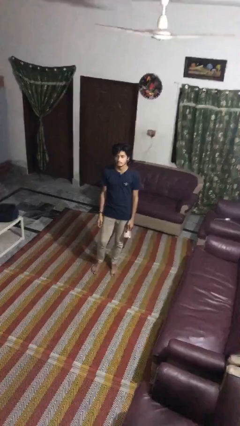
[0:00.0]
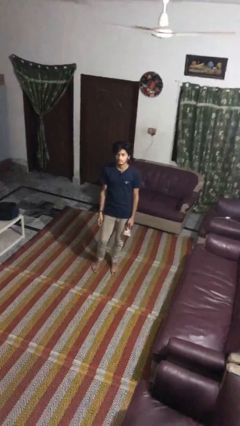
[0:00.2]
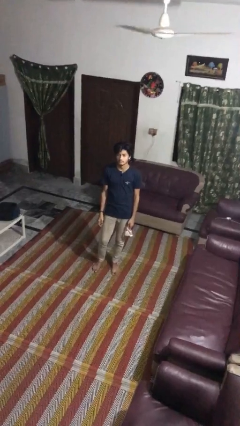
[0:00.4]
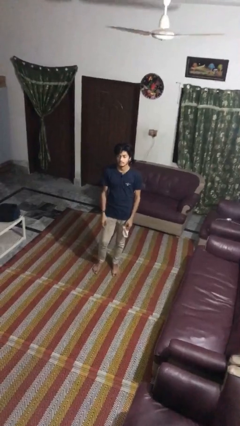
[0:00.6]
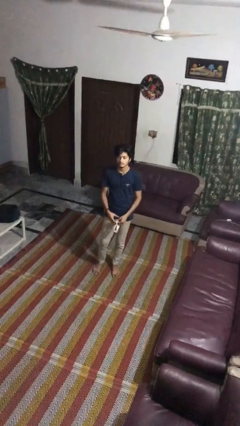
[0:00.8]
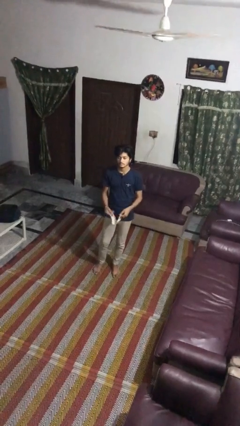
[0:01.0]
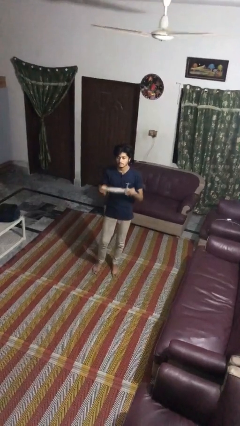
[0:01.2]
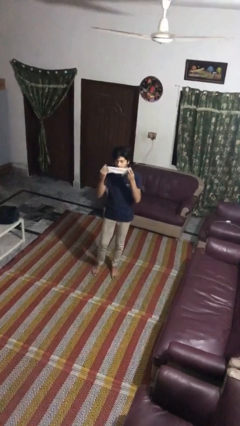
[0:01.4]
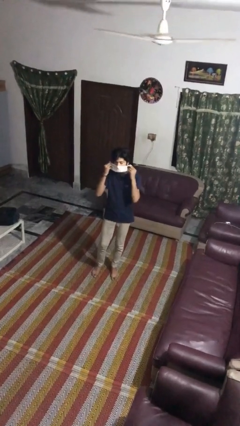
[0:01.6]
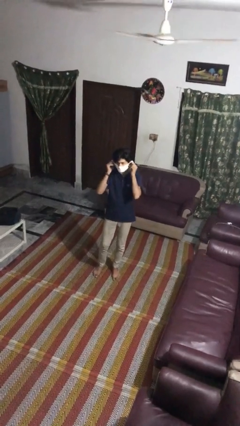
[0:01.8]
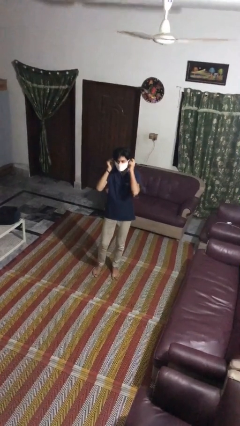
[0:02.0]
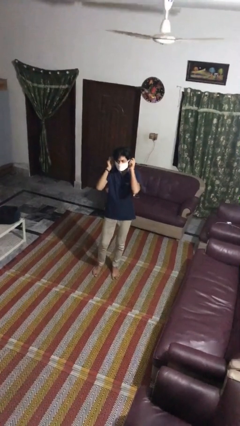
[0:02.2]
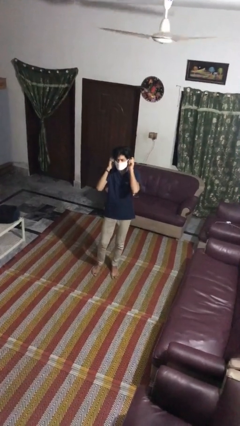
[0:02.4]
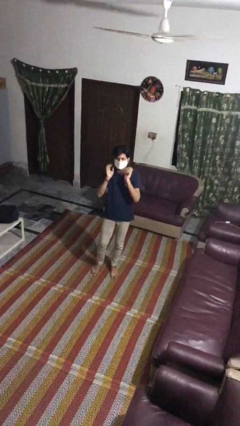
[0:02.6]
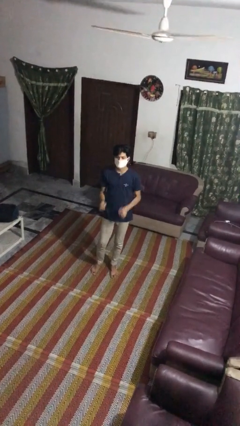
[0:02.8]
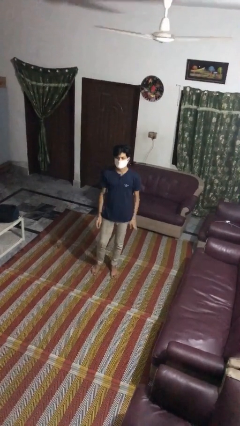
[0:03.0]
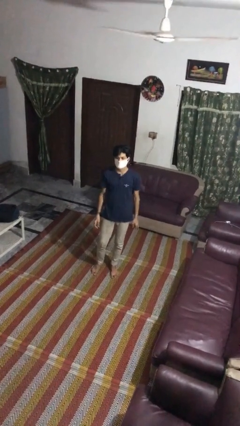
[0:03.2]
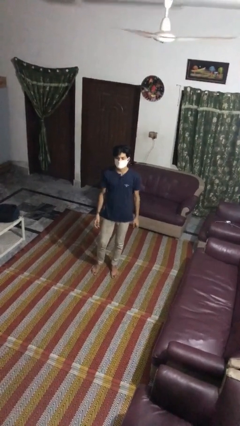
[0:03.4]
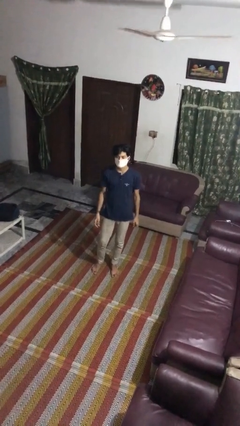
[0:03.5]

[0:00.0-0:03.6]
person puts on facemask

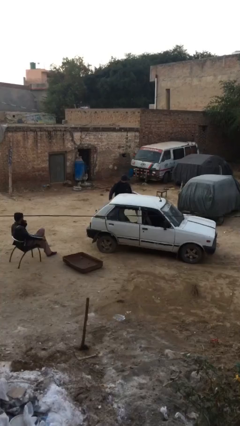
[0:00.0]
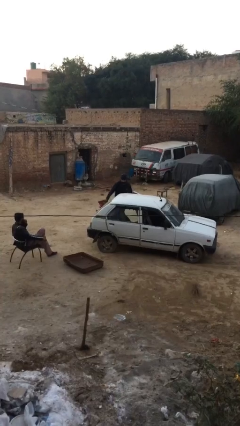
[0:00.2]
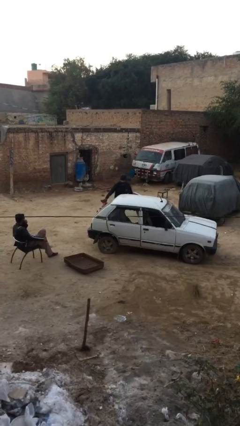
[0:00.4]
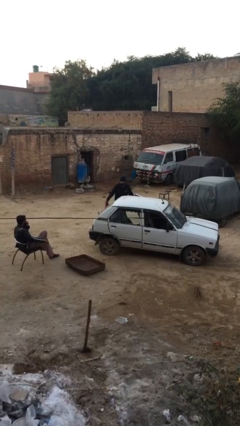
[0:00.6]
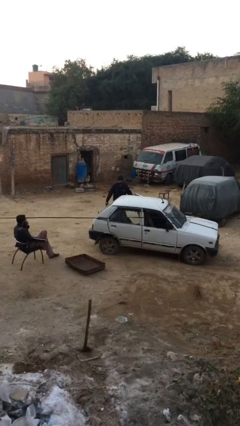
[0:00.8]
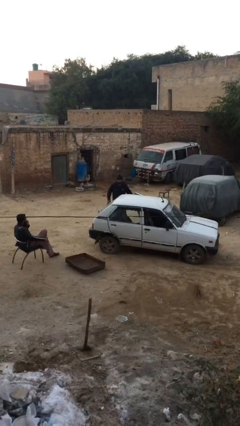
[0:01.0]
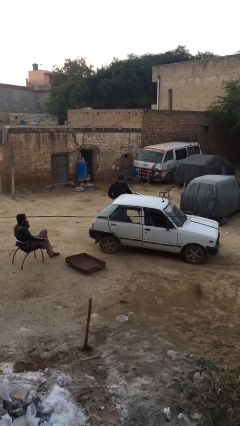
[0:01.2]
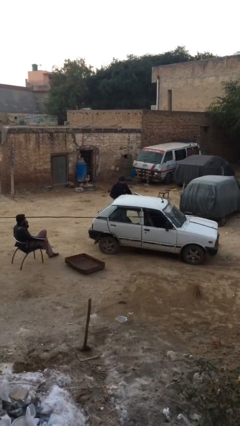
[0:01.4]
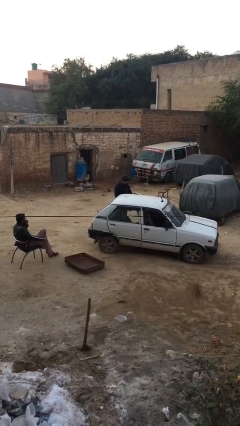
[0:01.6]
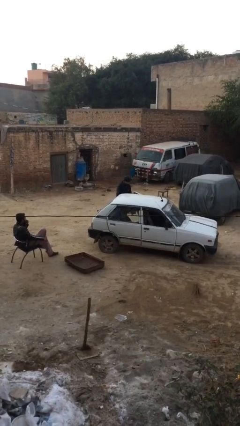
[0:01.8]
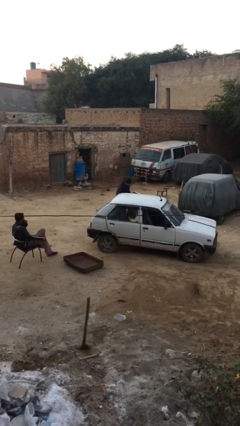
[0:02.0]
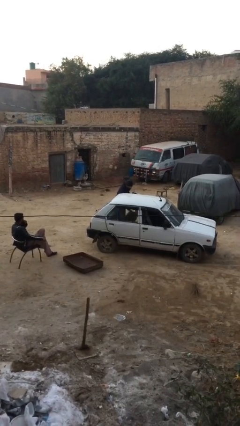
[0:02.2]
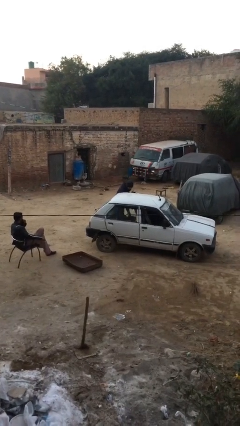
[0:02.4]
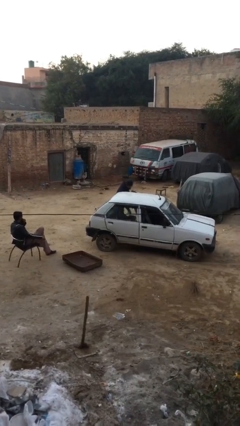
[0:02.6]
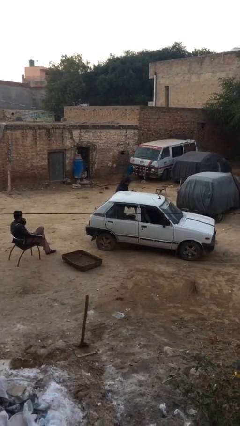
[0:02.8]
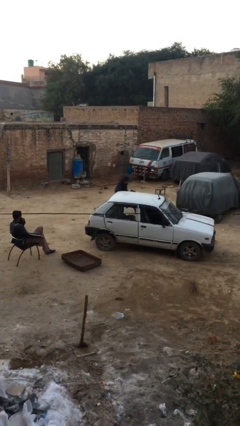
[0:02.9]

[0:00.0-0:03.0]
person loads car

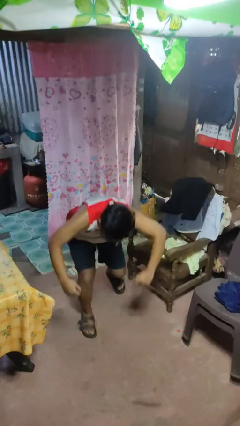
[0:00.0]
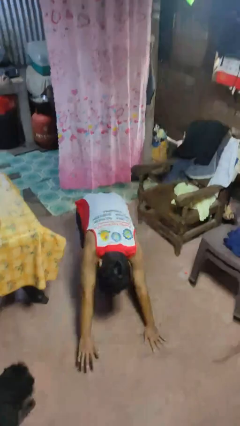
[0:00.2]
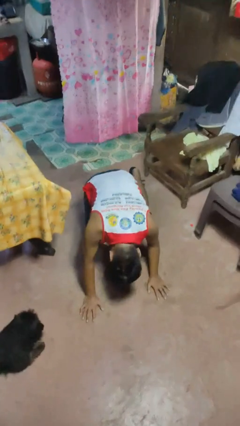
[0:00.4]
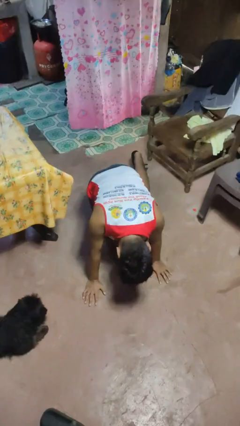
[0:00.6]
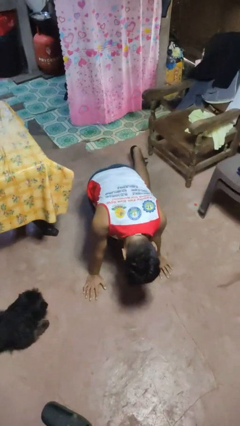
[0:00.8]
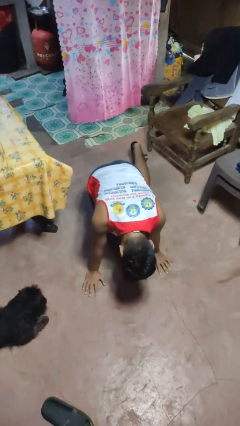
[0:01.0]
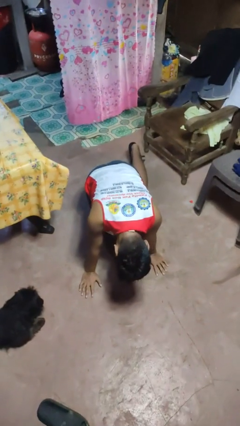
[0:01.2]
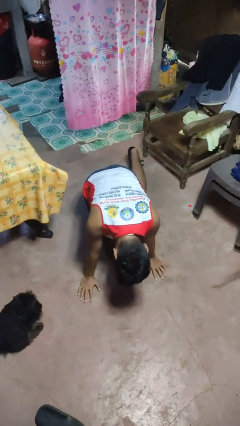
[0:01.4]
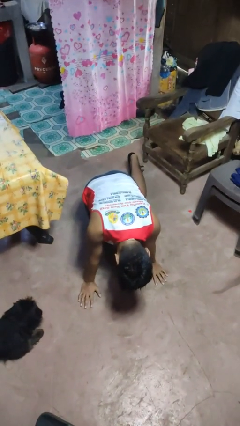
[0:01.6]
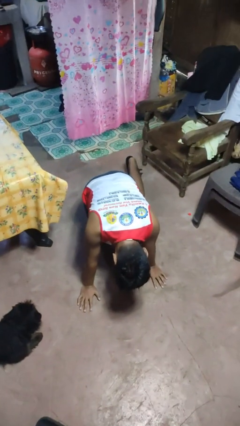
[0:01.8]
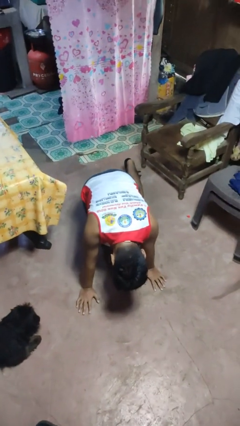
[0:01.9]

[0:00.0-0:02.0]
person lies down on floor

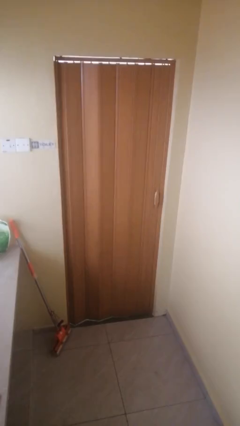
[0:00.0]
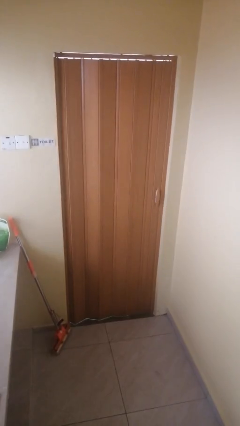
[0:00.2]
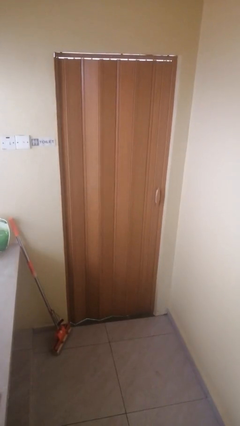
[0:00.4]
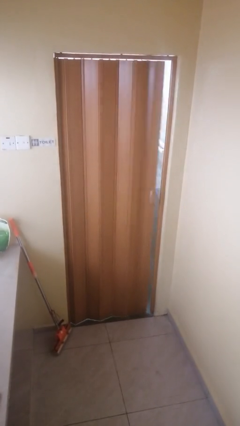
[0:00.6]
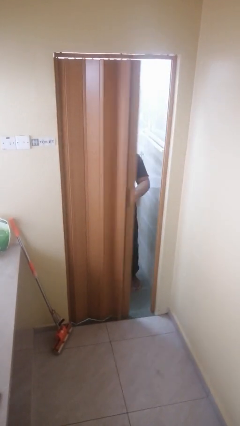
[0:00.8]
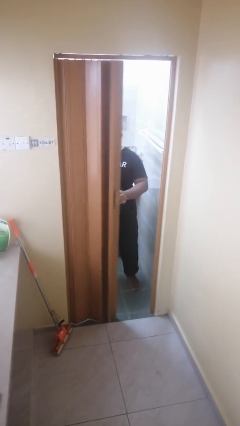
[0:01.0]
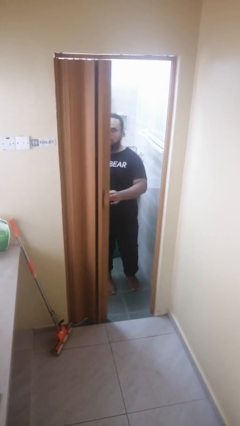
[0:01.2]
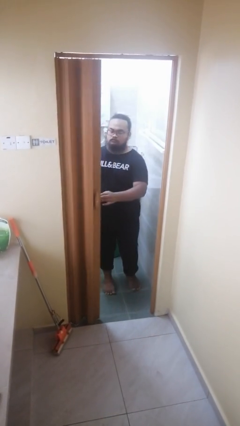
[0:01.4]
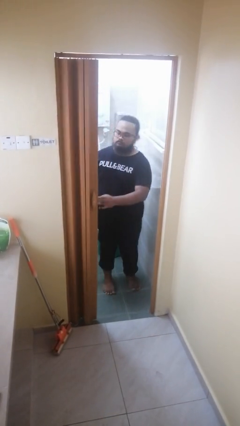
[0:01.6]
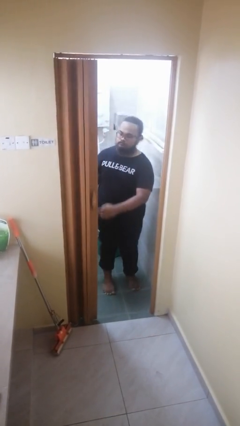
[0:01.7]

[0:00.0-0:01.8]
person opens sliding door

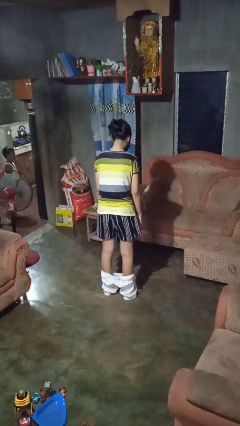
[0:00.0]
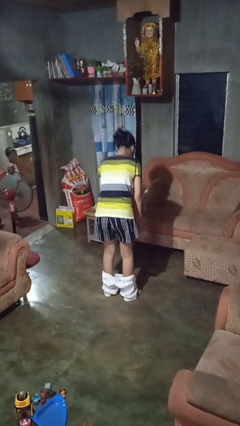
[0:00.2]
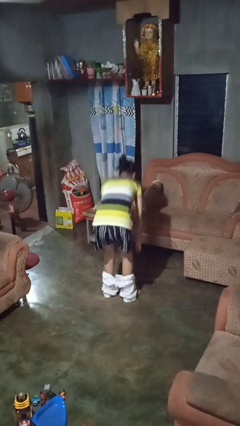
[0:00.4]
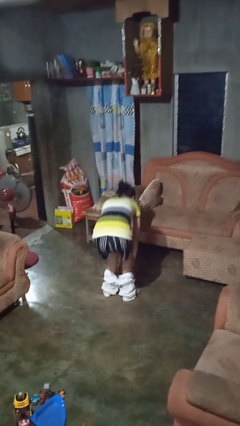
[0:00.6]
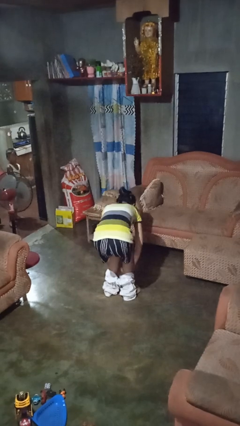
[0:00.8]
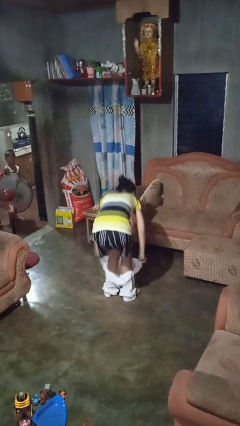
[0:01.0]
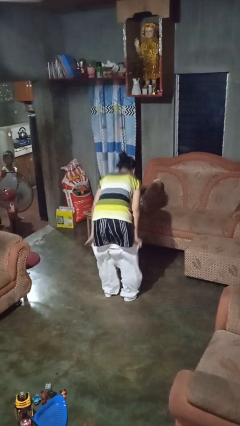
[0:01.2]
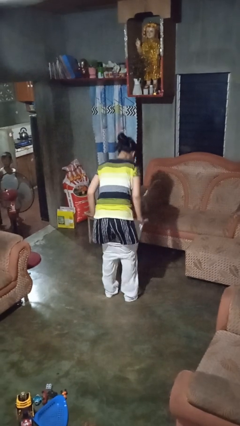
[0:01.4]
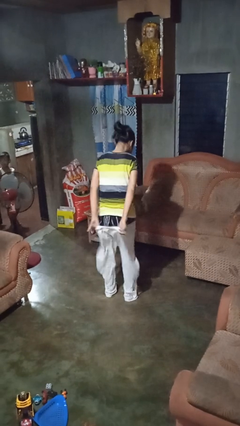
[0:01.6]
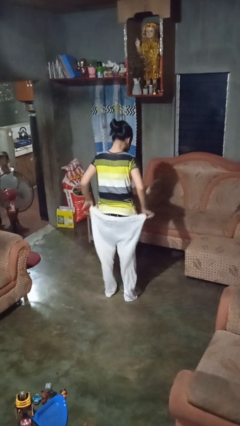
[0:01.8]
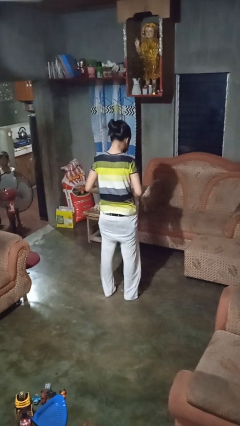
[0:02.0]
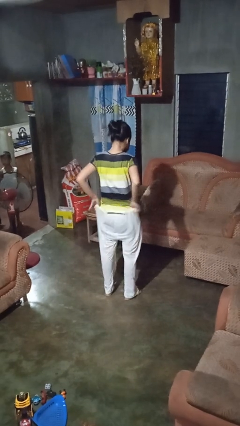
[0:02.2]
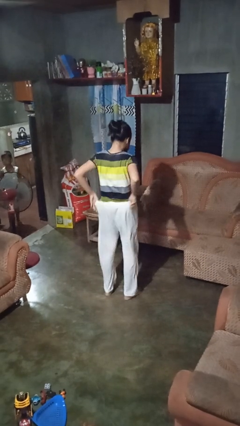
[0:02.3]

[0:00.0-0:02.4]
person puts on pants

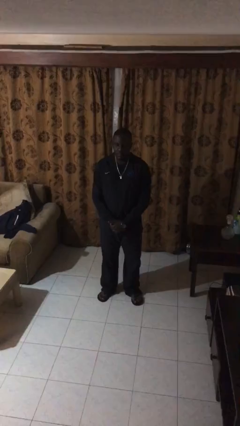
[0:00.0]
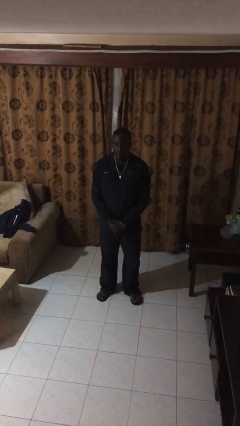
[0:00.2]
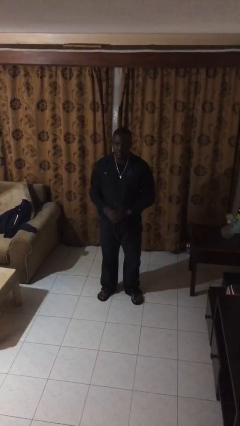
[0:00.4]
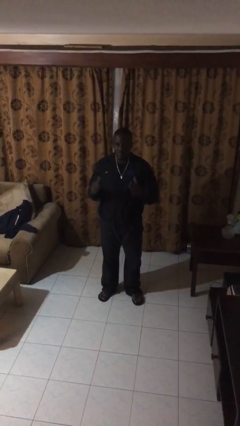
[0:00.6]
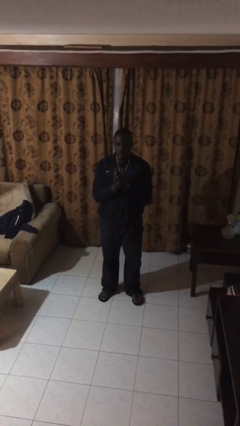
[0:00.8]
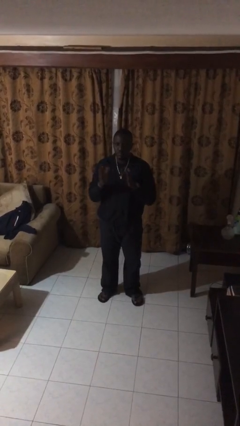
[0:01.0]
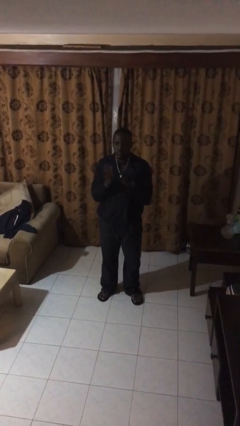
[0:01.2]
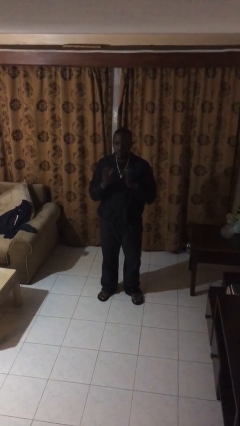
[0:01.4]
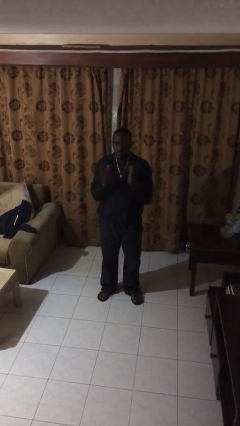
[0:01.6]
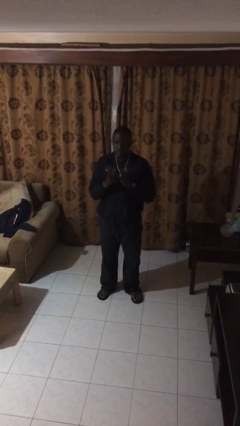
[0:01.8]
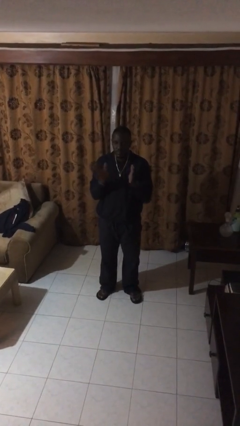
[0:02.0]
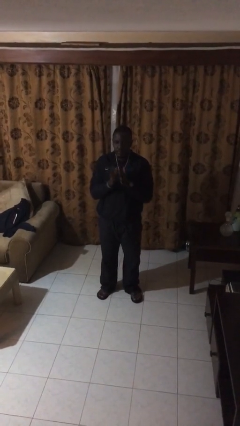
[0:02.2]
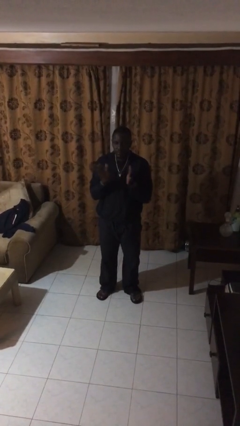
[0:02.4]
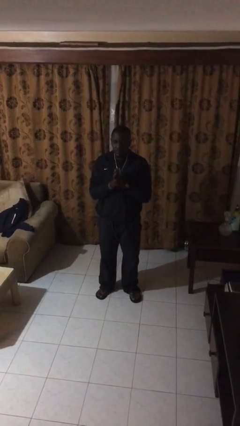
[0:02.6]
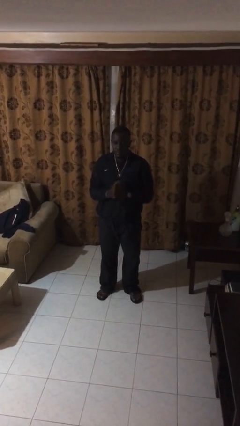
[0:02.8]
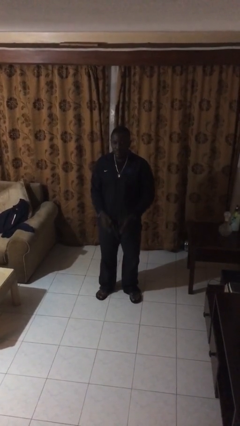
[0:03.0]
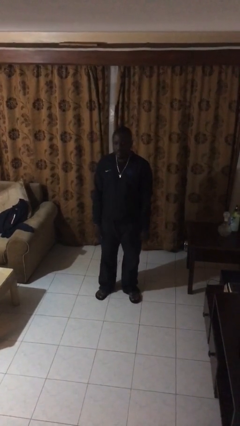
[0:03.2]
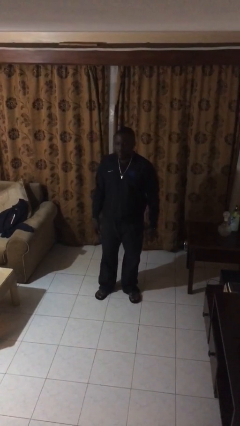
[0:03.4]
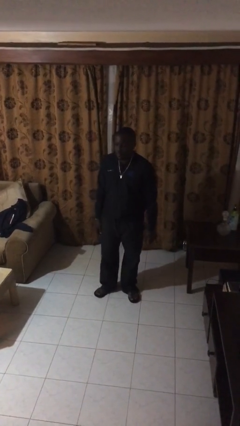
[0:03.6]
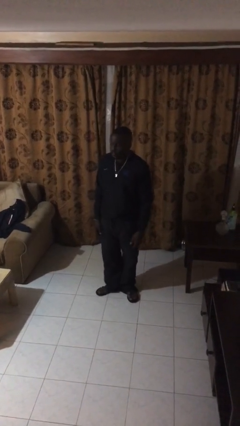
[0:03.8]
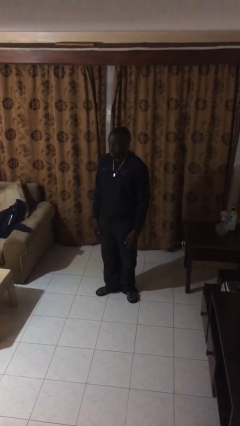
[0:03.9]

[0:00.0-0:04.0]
person claps hands

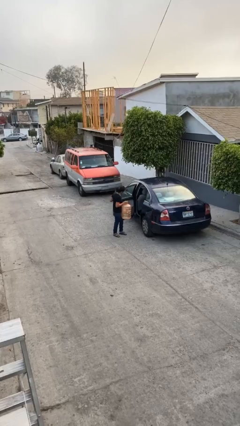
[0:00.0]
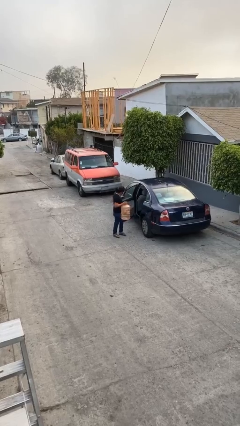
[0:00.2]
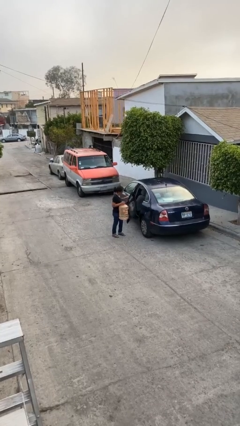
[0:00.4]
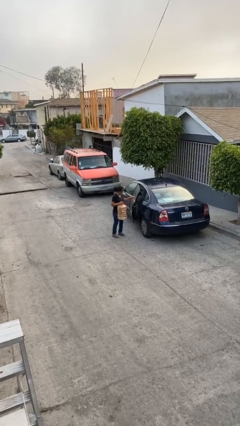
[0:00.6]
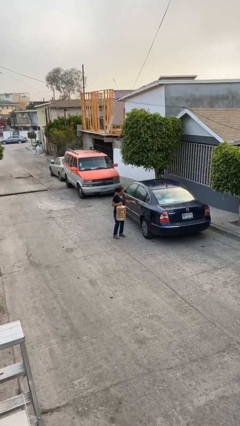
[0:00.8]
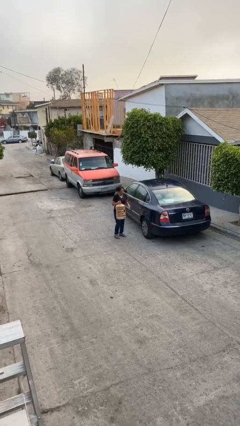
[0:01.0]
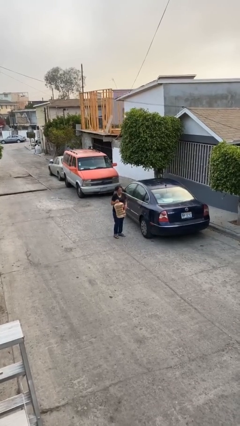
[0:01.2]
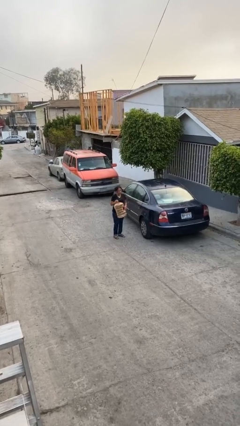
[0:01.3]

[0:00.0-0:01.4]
person closes car door
